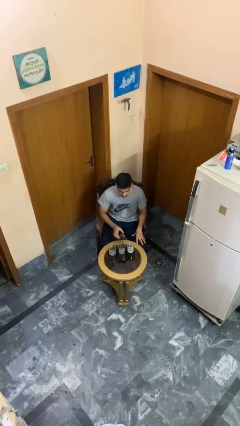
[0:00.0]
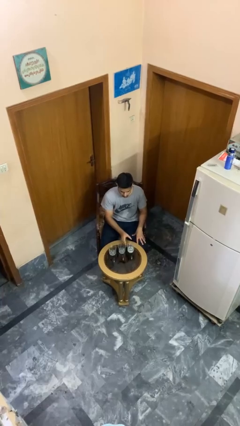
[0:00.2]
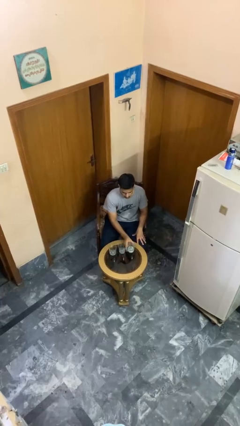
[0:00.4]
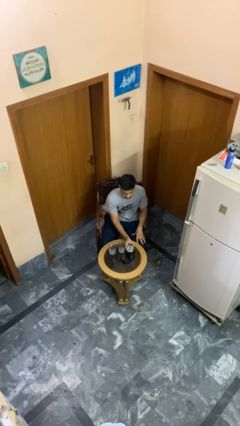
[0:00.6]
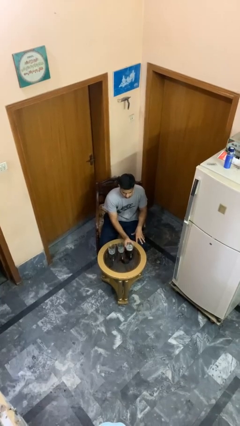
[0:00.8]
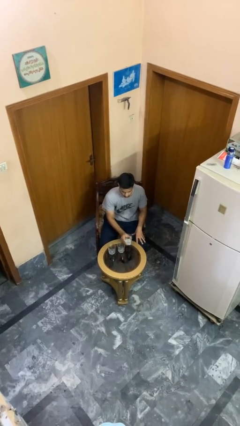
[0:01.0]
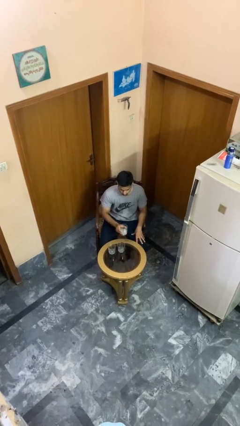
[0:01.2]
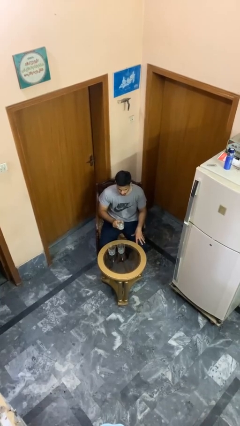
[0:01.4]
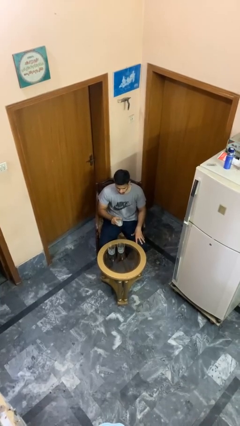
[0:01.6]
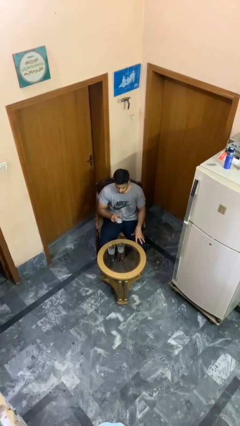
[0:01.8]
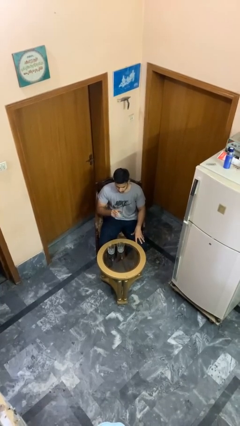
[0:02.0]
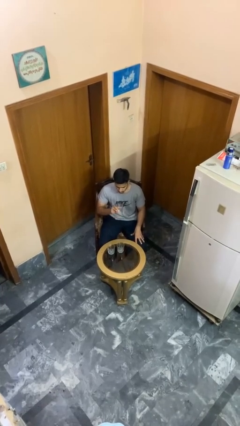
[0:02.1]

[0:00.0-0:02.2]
person picks up object from table

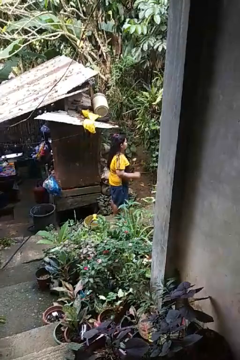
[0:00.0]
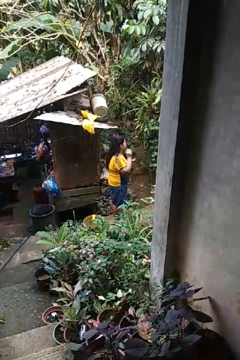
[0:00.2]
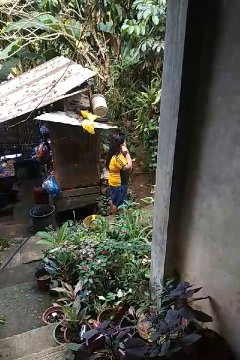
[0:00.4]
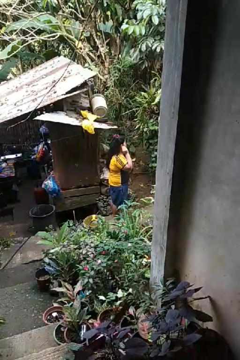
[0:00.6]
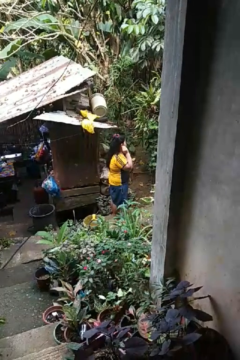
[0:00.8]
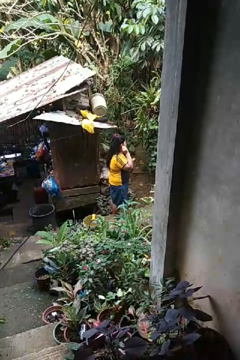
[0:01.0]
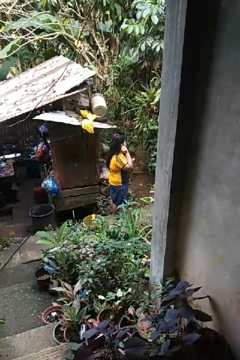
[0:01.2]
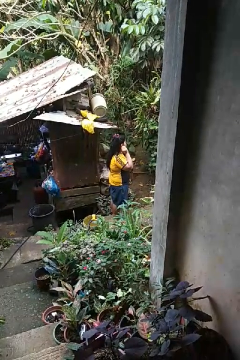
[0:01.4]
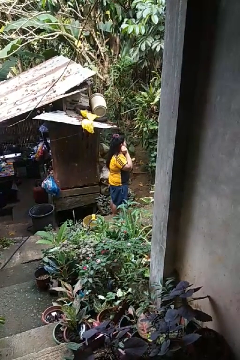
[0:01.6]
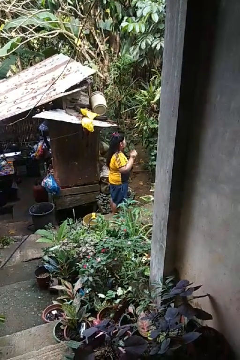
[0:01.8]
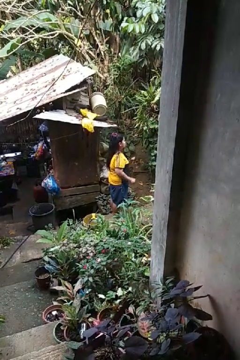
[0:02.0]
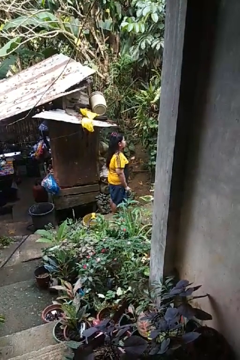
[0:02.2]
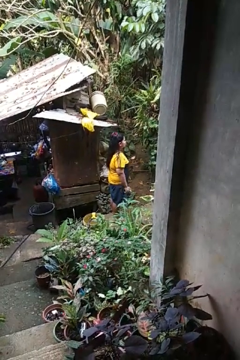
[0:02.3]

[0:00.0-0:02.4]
person puts on earrings

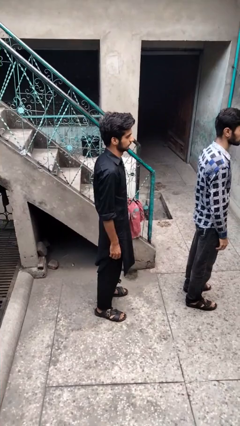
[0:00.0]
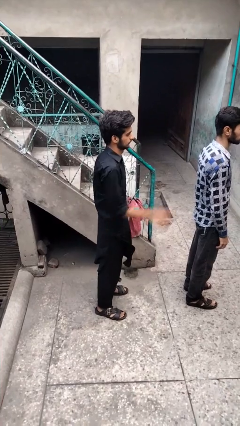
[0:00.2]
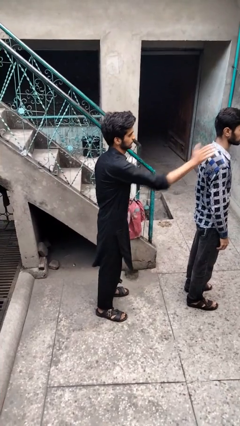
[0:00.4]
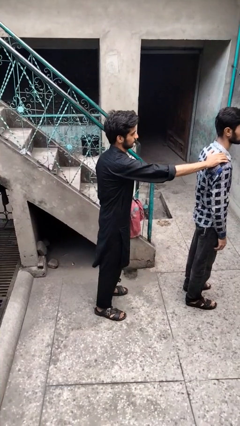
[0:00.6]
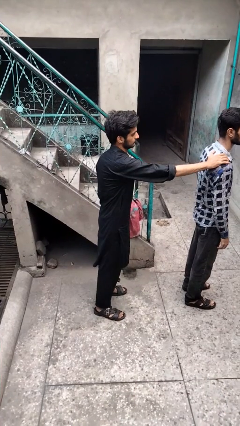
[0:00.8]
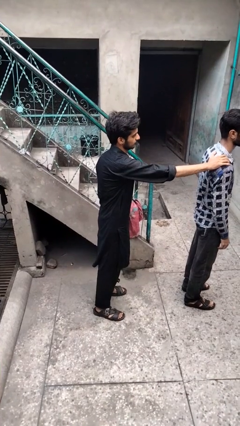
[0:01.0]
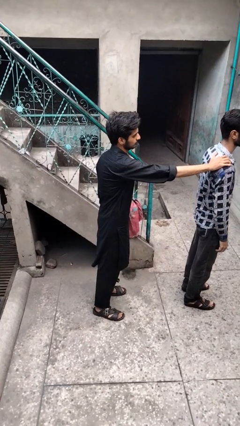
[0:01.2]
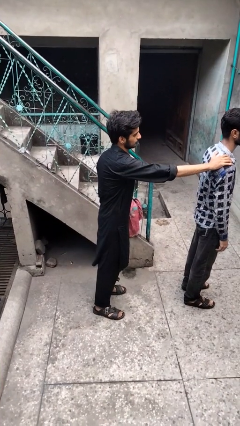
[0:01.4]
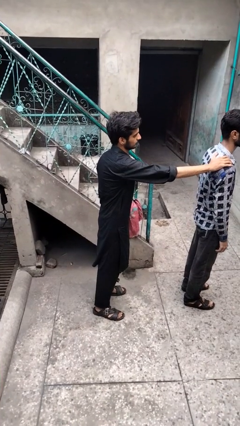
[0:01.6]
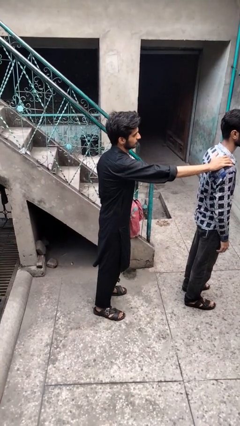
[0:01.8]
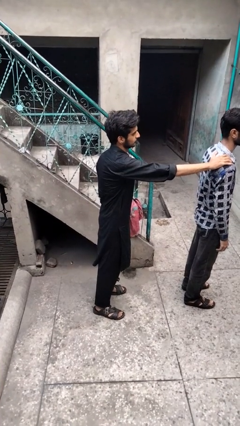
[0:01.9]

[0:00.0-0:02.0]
person grabs person by shoulder

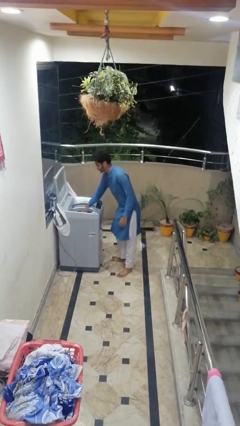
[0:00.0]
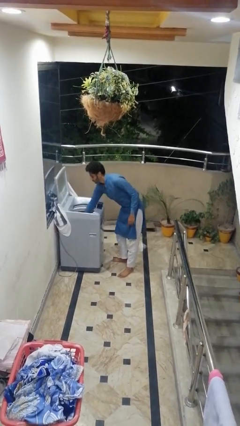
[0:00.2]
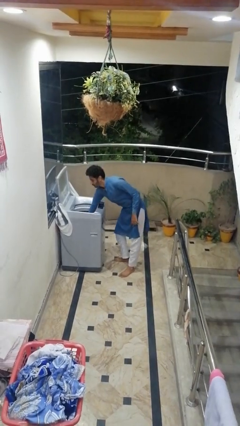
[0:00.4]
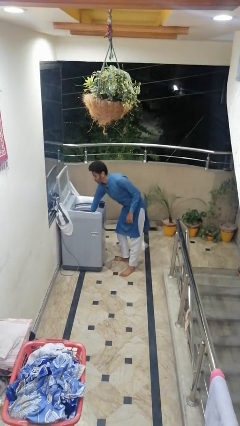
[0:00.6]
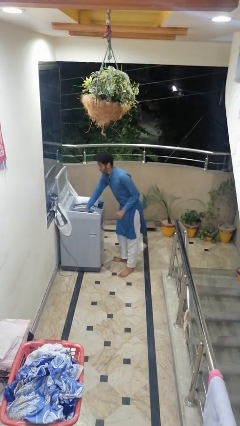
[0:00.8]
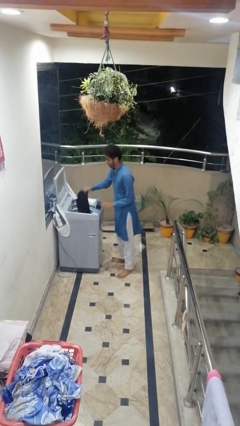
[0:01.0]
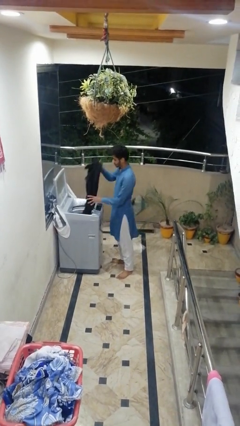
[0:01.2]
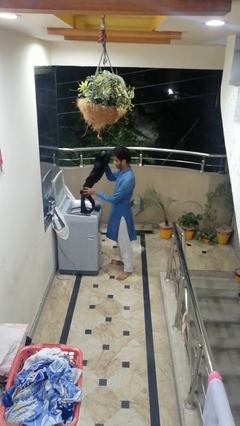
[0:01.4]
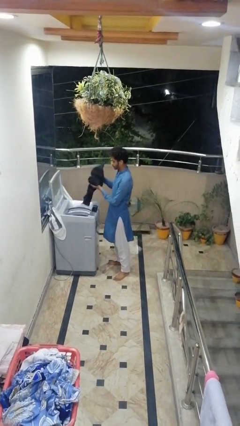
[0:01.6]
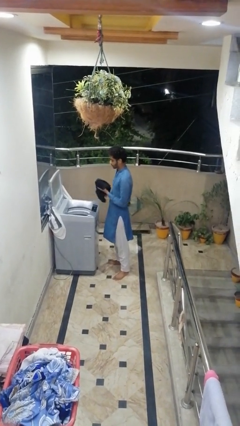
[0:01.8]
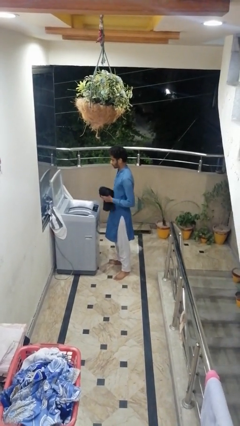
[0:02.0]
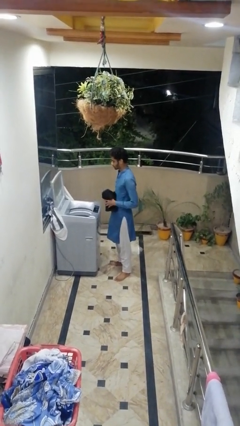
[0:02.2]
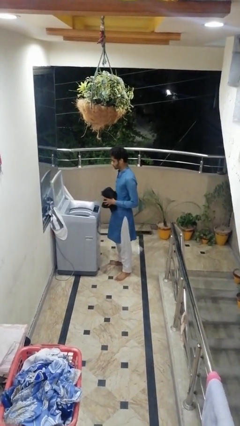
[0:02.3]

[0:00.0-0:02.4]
person loads clotheswasher

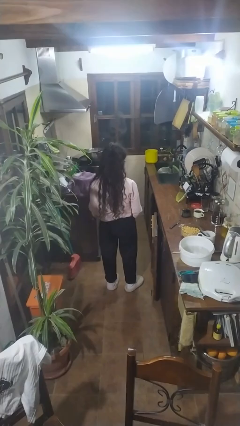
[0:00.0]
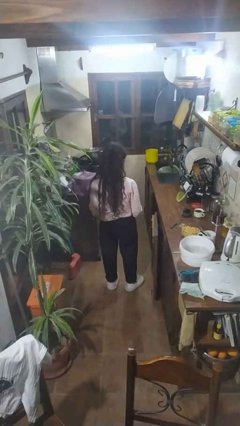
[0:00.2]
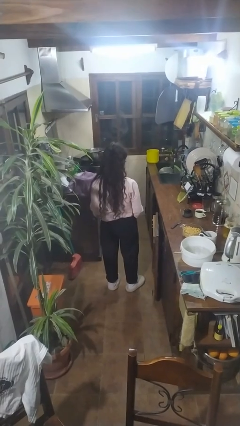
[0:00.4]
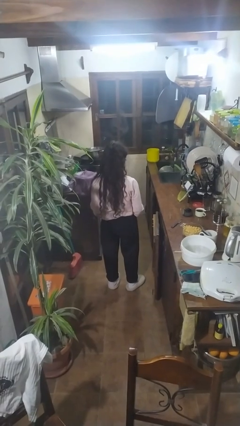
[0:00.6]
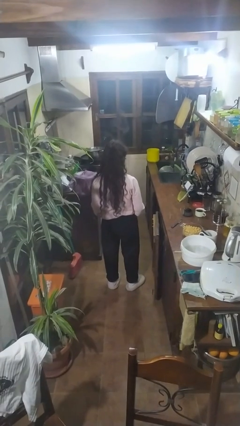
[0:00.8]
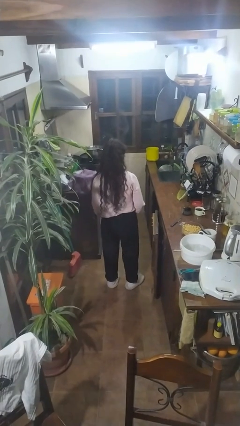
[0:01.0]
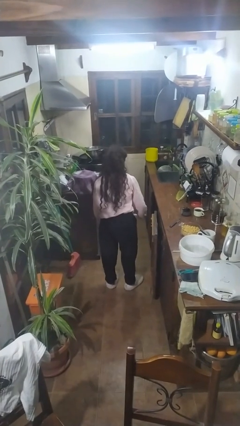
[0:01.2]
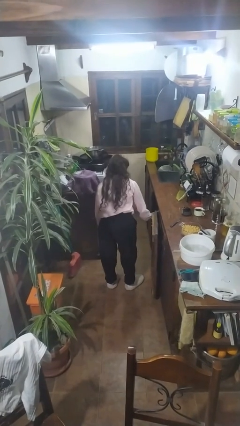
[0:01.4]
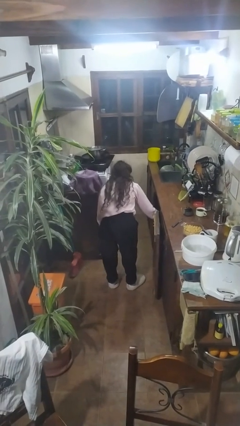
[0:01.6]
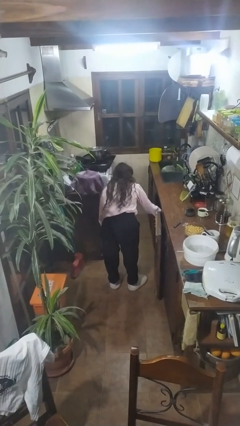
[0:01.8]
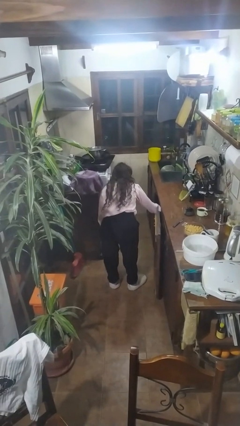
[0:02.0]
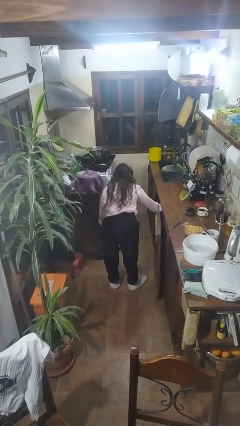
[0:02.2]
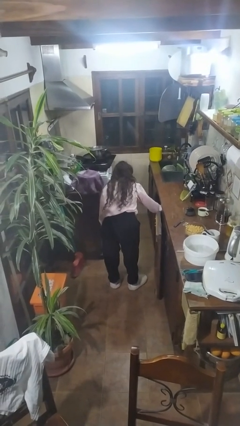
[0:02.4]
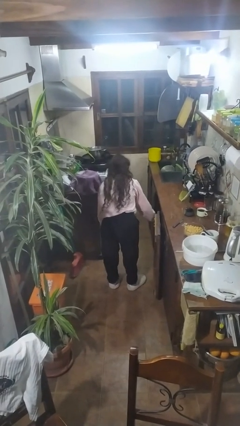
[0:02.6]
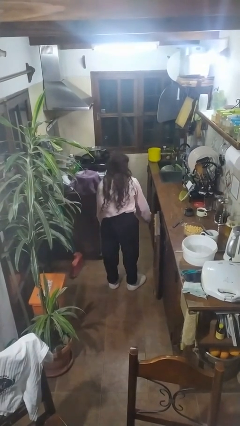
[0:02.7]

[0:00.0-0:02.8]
person puts object in cabinet

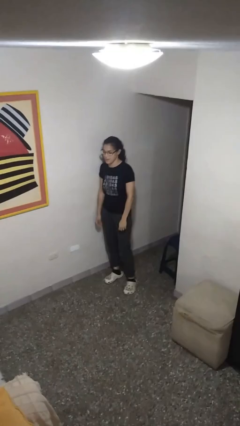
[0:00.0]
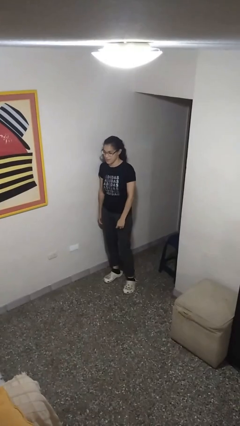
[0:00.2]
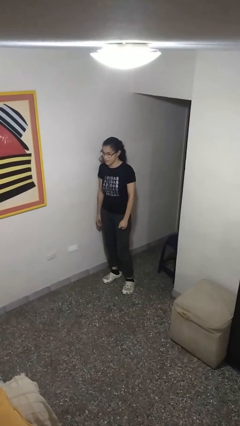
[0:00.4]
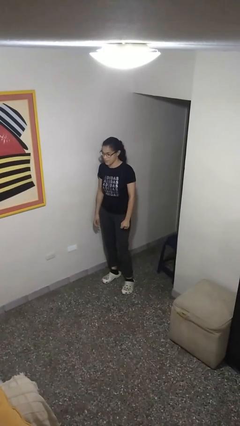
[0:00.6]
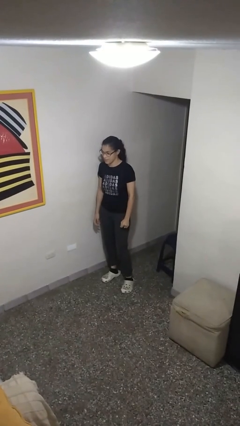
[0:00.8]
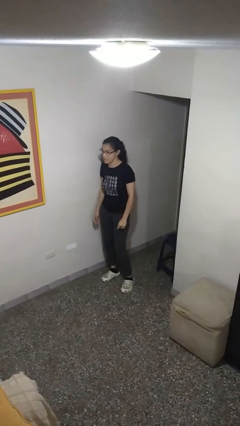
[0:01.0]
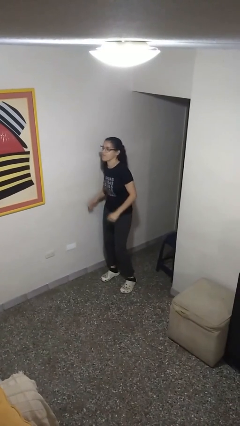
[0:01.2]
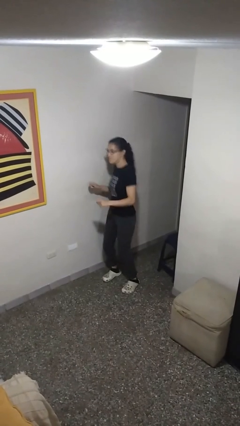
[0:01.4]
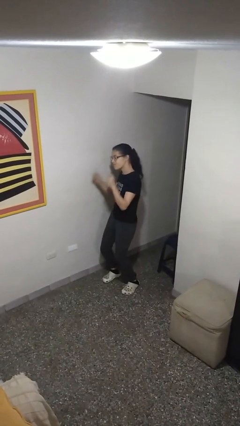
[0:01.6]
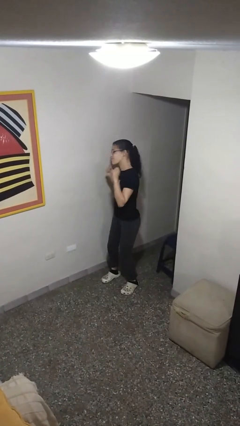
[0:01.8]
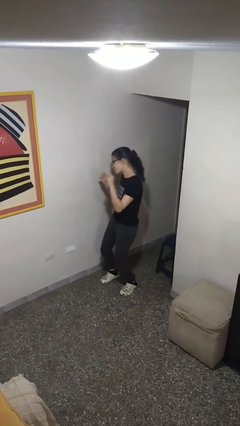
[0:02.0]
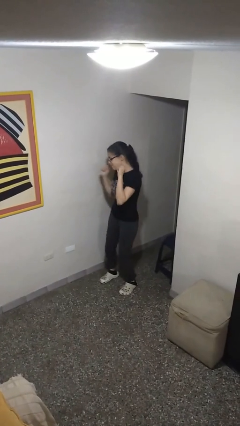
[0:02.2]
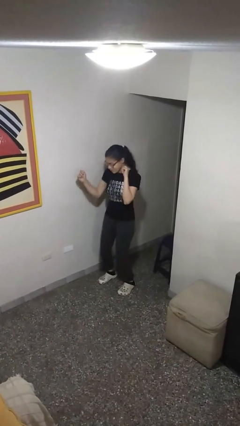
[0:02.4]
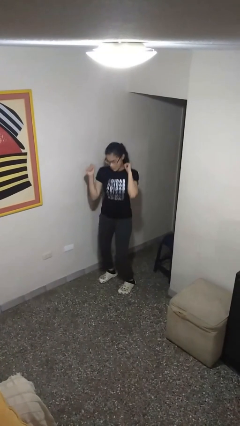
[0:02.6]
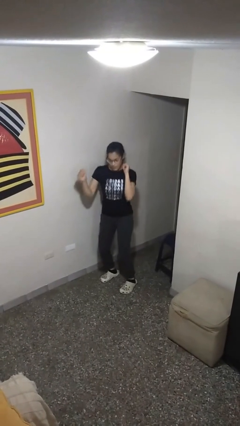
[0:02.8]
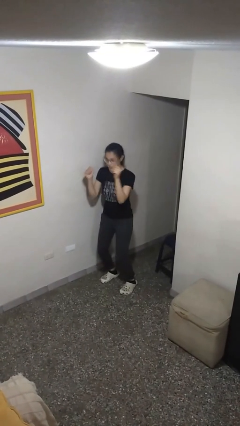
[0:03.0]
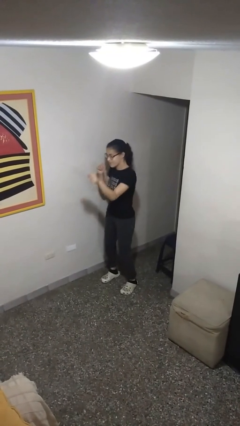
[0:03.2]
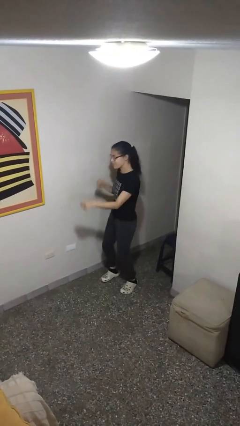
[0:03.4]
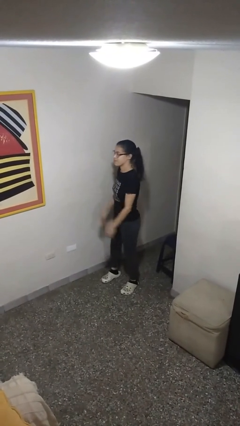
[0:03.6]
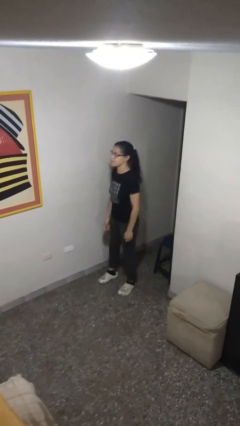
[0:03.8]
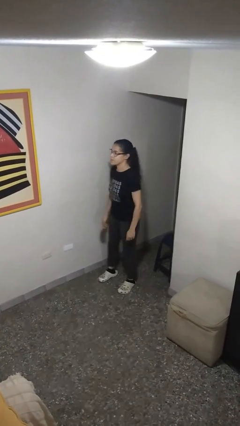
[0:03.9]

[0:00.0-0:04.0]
person dances in place

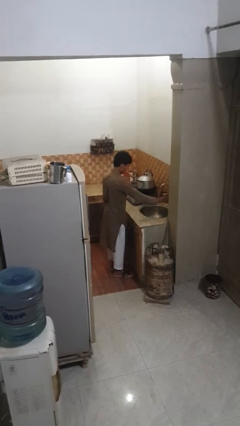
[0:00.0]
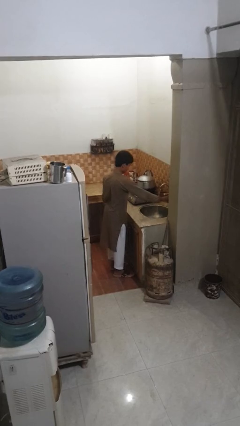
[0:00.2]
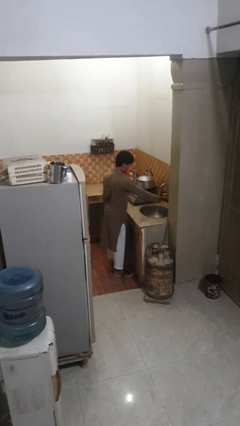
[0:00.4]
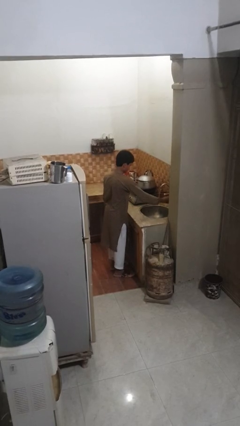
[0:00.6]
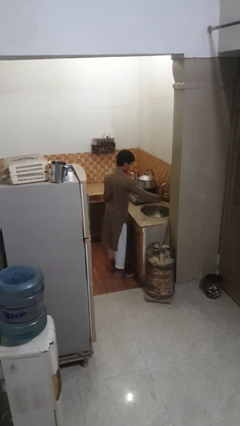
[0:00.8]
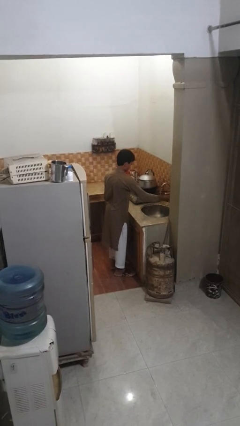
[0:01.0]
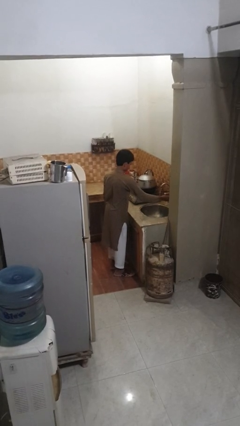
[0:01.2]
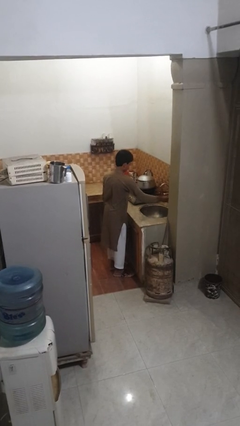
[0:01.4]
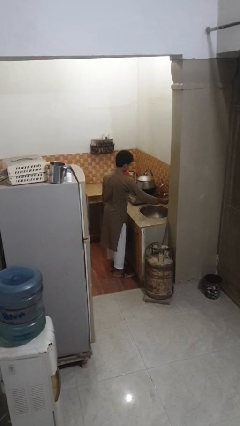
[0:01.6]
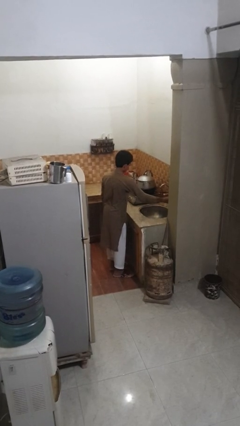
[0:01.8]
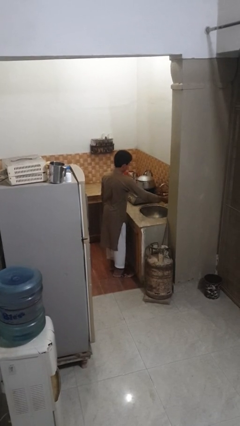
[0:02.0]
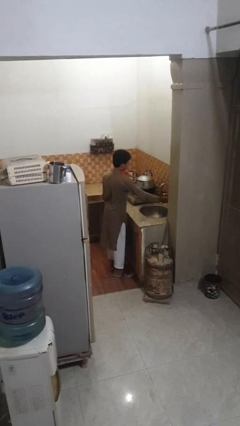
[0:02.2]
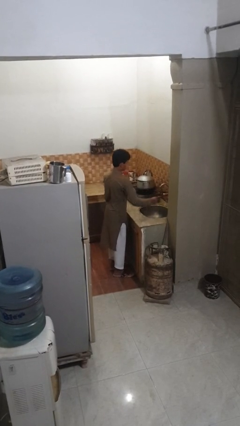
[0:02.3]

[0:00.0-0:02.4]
person turns off faucet
